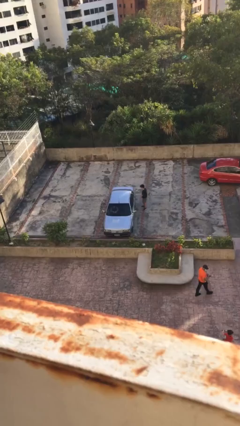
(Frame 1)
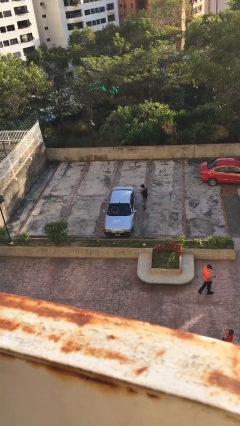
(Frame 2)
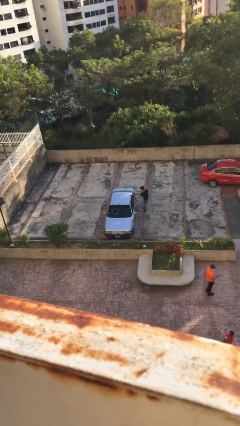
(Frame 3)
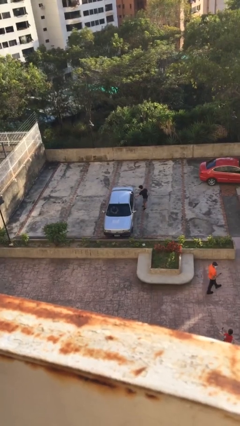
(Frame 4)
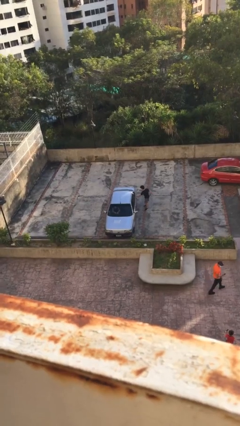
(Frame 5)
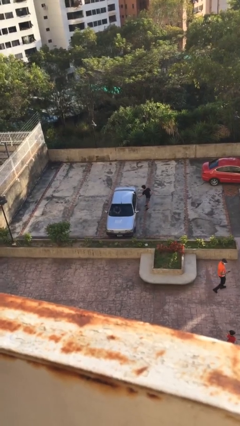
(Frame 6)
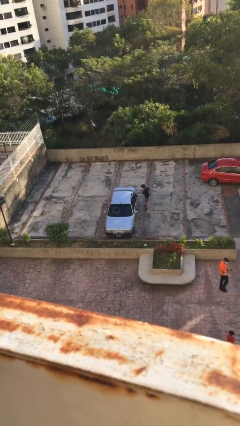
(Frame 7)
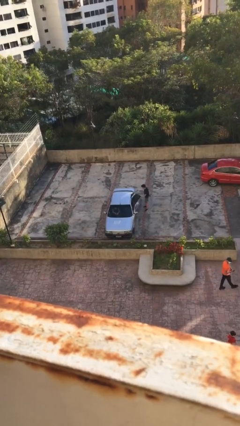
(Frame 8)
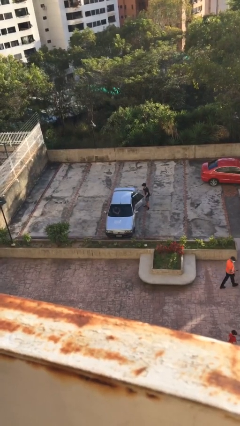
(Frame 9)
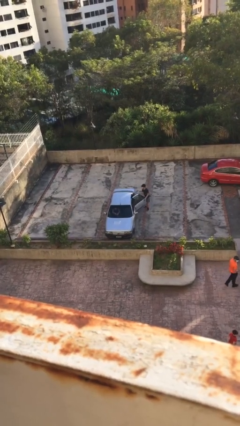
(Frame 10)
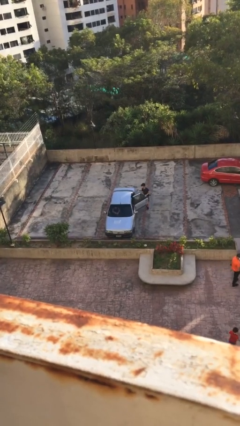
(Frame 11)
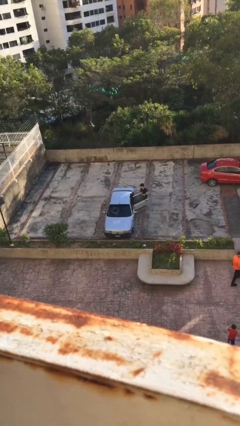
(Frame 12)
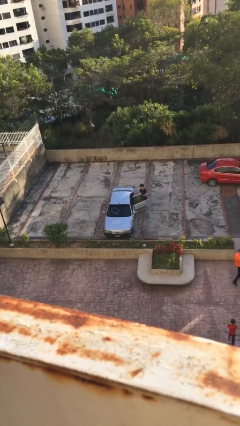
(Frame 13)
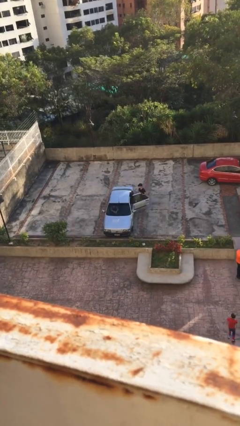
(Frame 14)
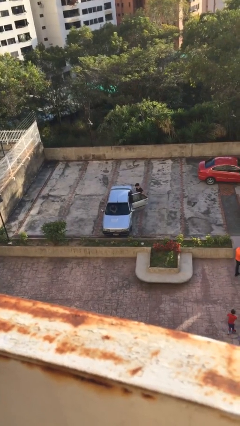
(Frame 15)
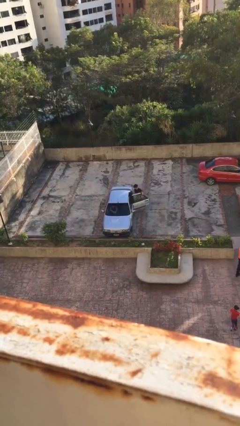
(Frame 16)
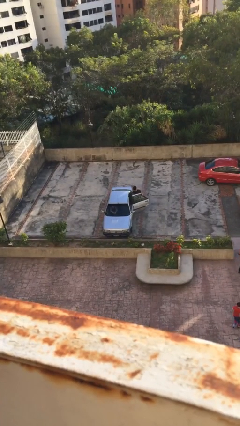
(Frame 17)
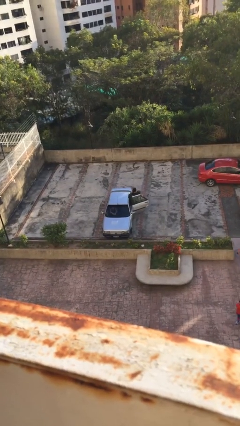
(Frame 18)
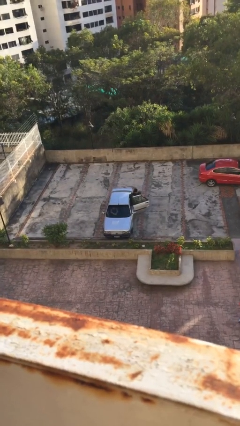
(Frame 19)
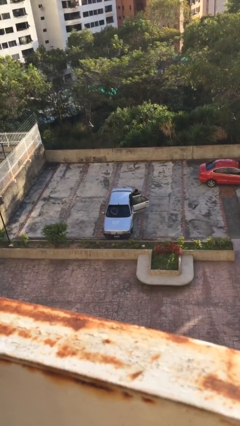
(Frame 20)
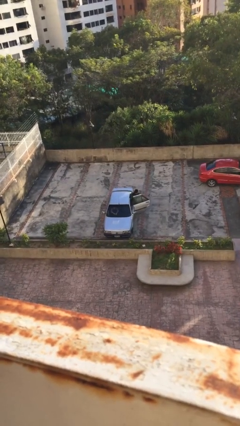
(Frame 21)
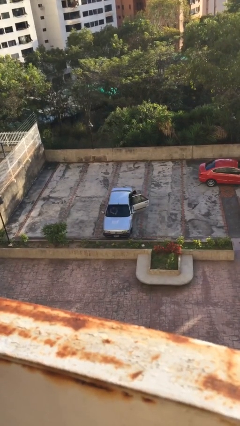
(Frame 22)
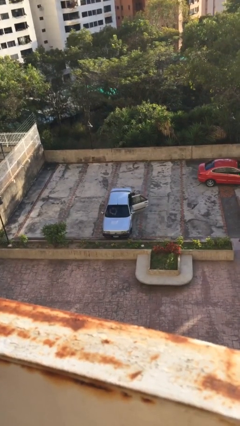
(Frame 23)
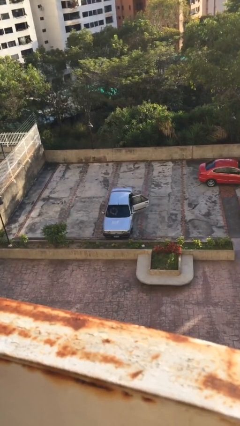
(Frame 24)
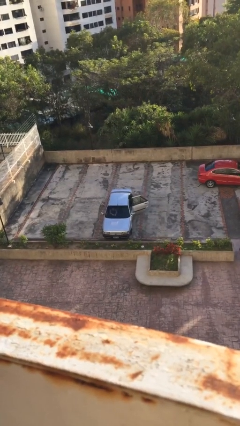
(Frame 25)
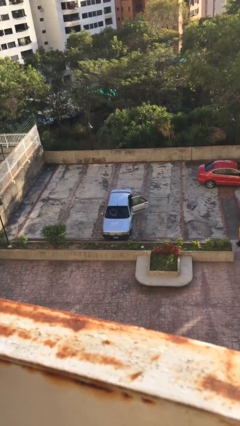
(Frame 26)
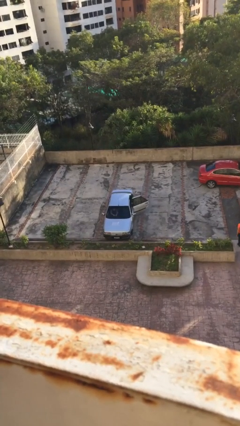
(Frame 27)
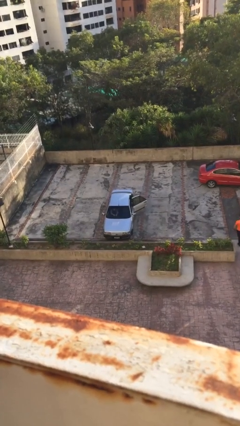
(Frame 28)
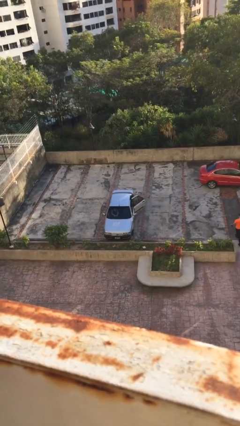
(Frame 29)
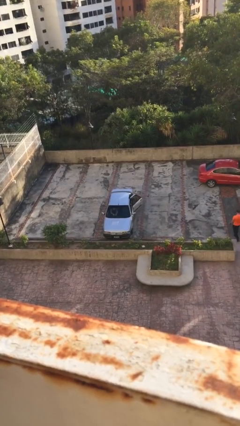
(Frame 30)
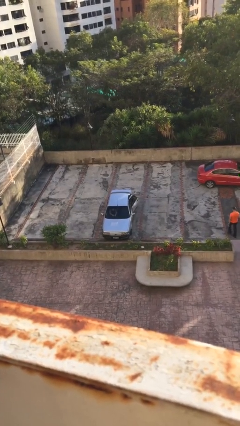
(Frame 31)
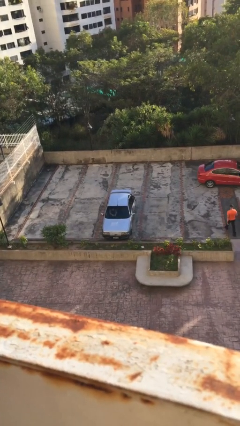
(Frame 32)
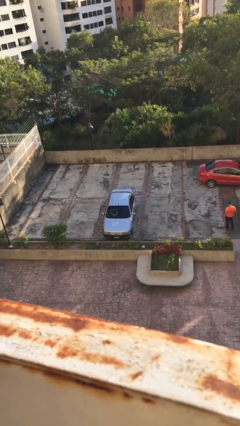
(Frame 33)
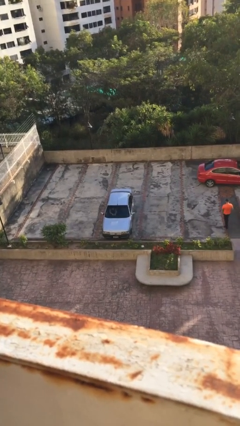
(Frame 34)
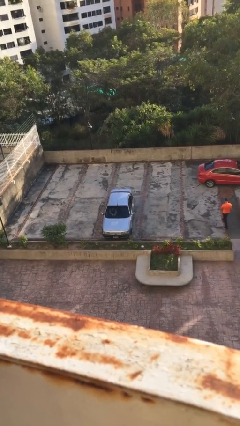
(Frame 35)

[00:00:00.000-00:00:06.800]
car picks up person

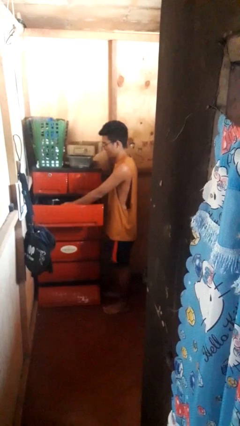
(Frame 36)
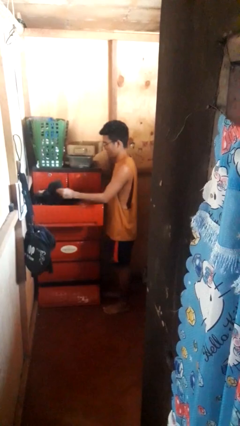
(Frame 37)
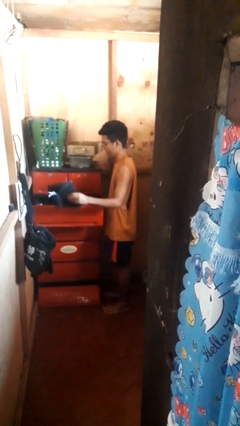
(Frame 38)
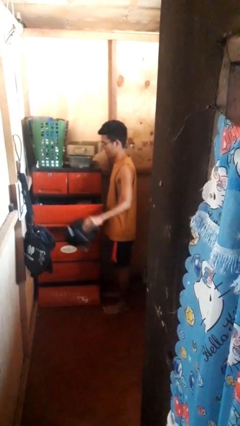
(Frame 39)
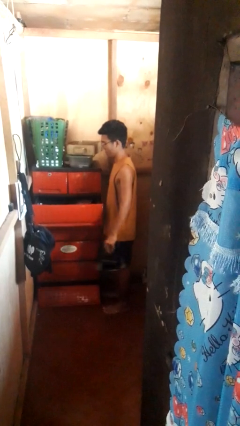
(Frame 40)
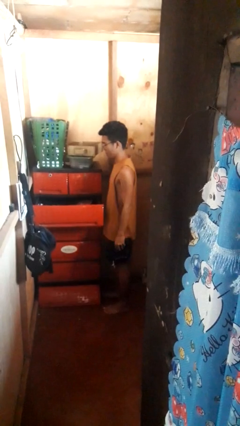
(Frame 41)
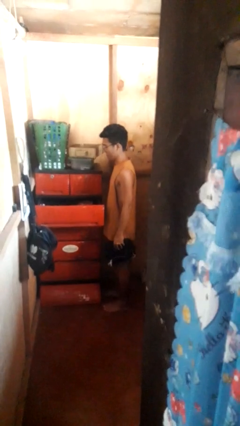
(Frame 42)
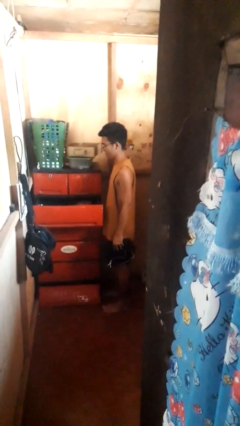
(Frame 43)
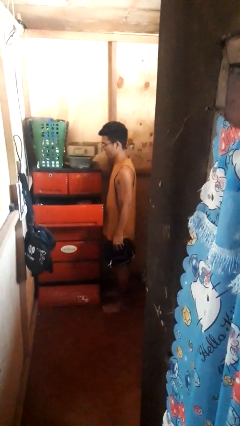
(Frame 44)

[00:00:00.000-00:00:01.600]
person takes clothes from dresser

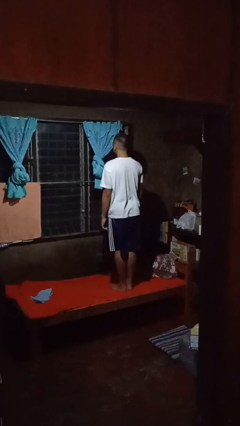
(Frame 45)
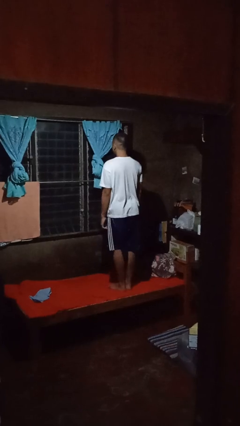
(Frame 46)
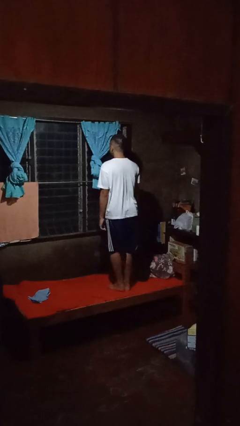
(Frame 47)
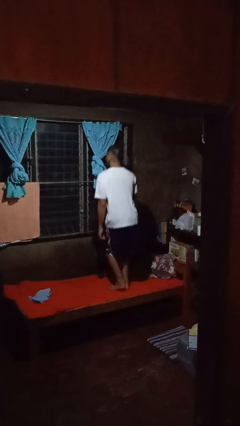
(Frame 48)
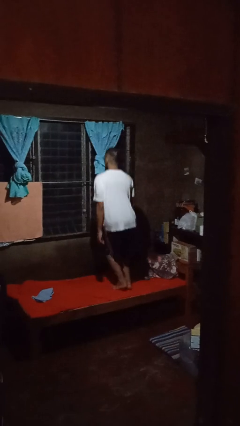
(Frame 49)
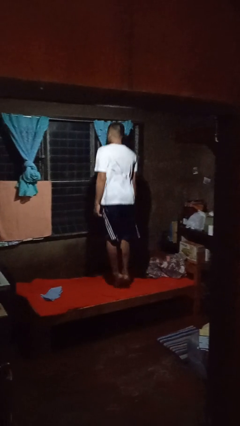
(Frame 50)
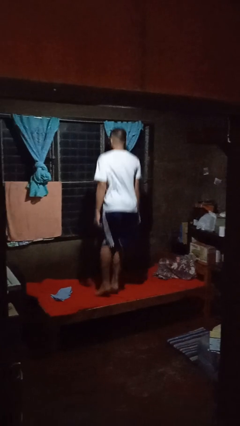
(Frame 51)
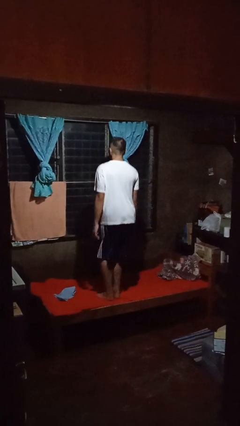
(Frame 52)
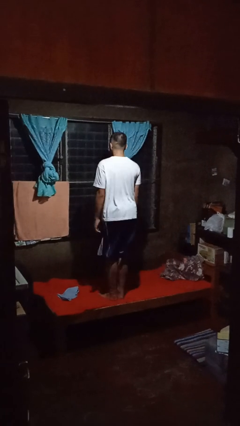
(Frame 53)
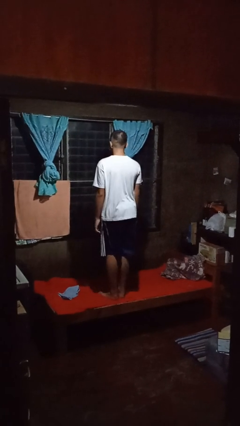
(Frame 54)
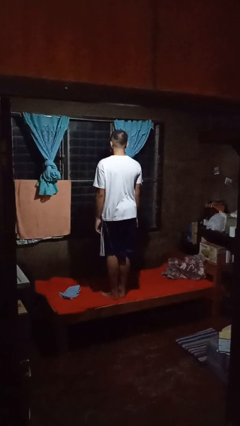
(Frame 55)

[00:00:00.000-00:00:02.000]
person jumps on bed

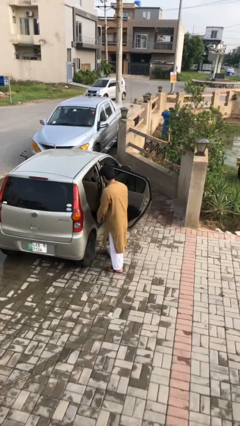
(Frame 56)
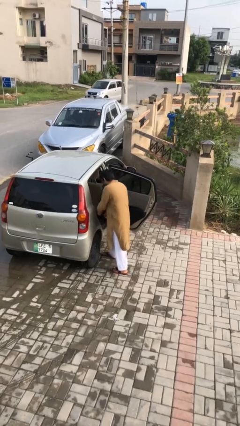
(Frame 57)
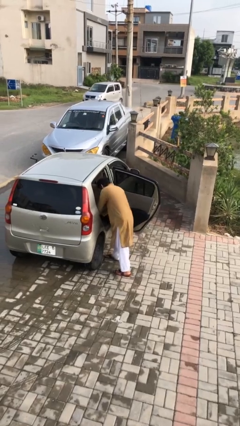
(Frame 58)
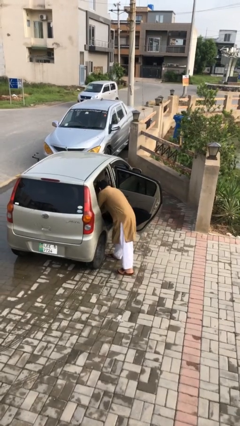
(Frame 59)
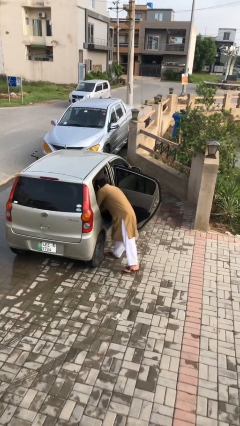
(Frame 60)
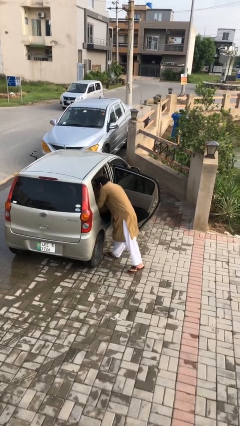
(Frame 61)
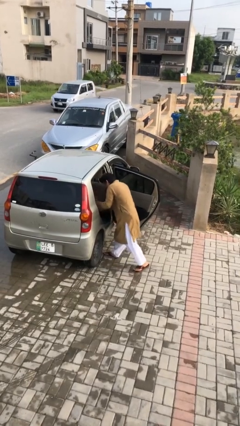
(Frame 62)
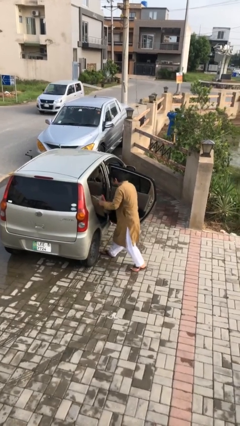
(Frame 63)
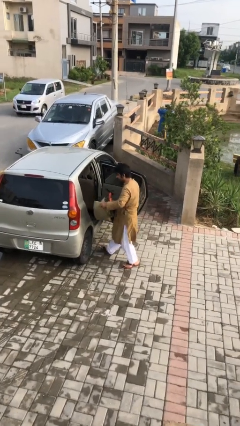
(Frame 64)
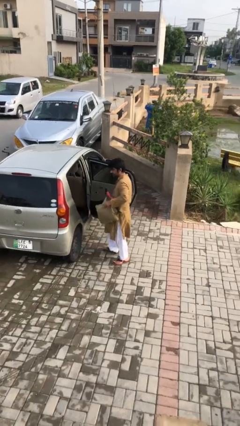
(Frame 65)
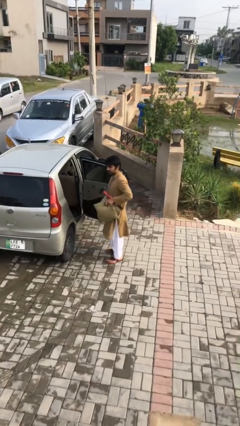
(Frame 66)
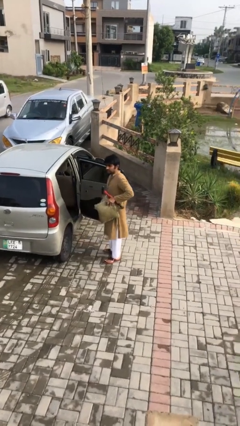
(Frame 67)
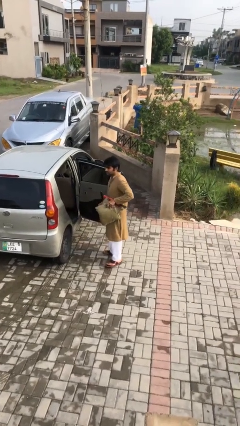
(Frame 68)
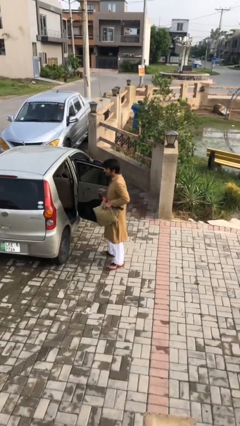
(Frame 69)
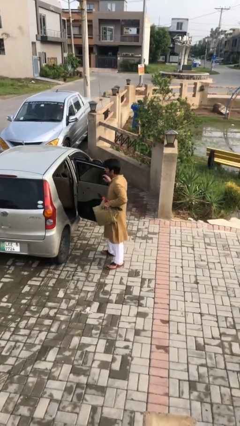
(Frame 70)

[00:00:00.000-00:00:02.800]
person unloads car

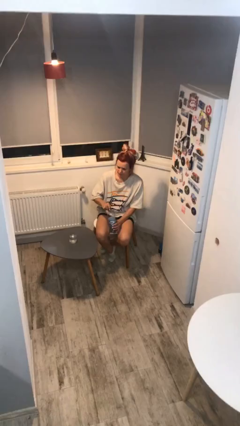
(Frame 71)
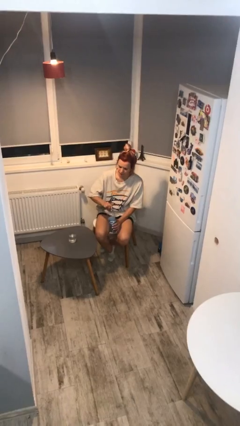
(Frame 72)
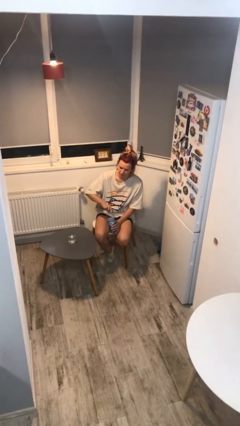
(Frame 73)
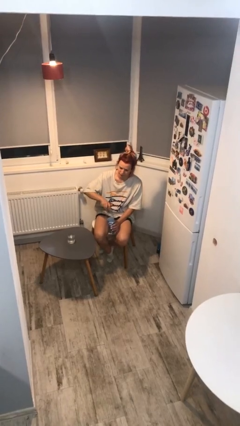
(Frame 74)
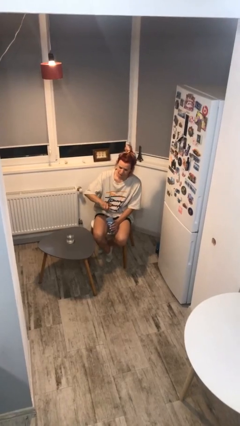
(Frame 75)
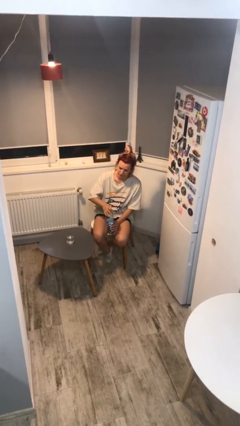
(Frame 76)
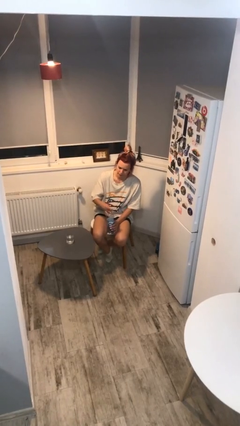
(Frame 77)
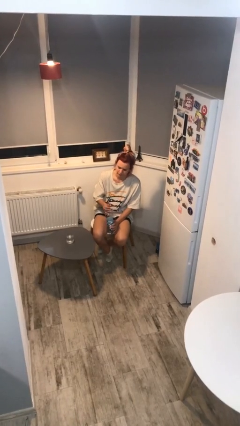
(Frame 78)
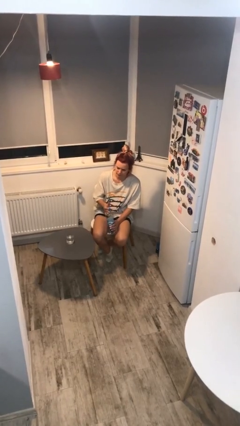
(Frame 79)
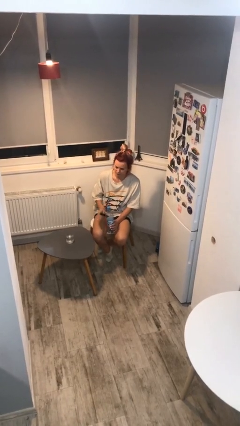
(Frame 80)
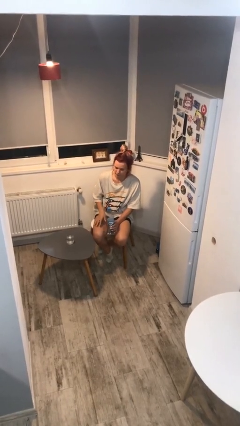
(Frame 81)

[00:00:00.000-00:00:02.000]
person screws lid to bottle

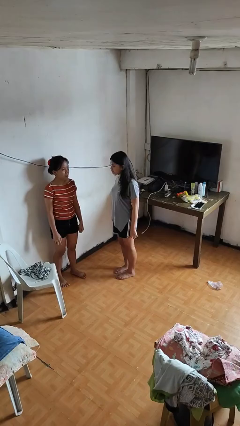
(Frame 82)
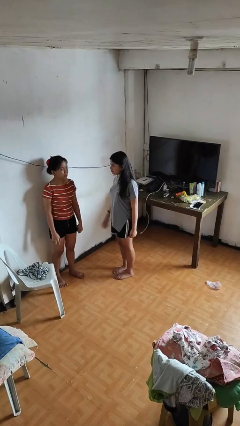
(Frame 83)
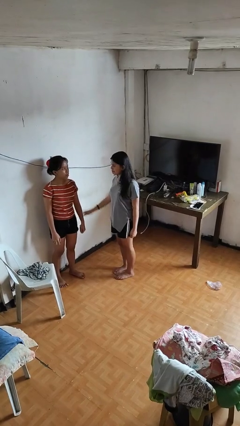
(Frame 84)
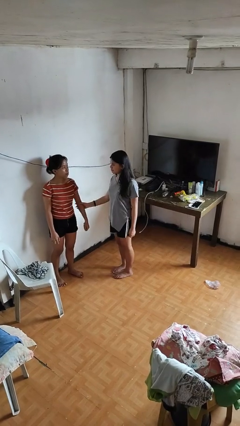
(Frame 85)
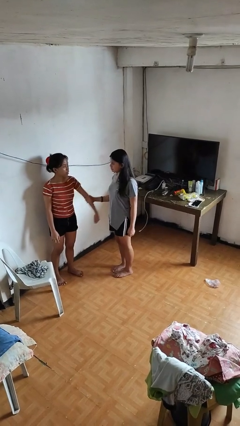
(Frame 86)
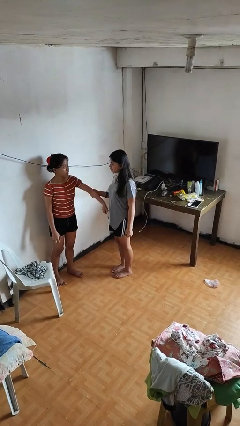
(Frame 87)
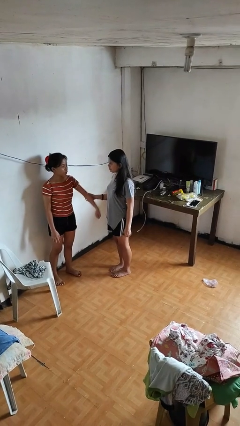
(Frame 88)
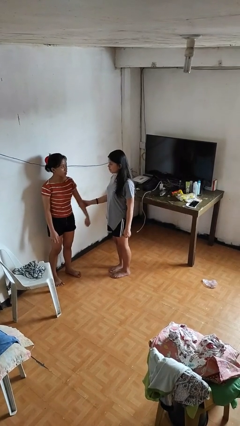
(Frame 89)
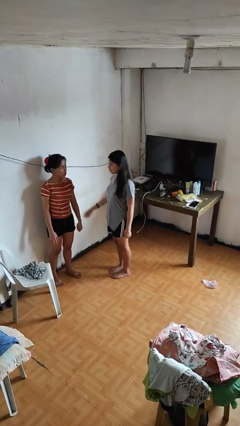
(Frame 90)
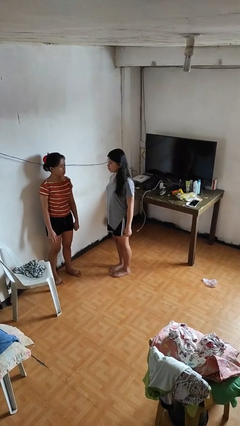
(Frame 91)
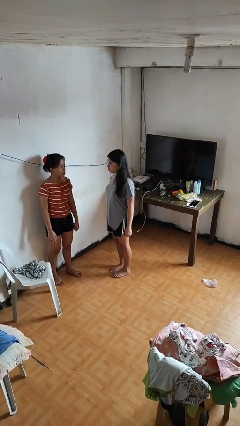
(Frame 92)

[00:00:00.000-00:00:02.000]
person grabs person by forearm
